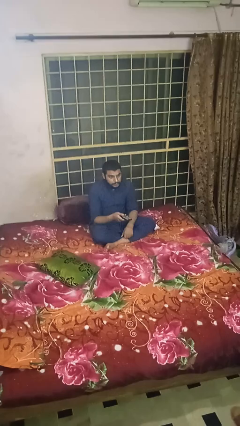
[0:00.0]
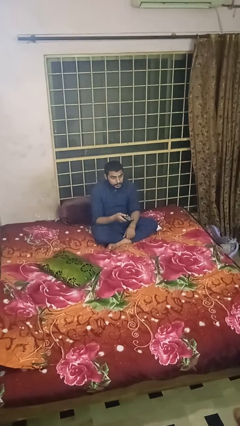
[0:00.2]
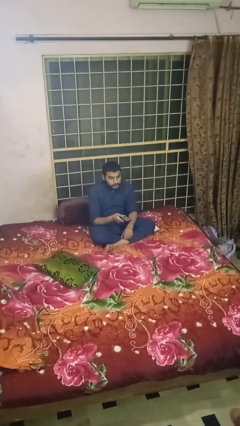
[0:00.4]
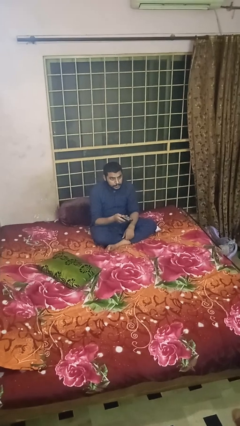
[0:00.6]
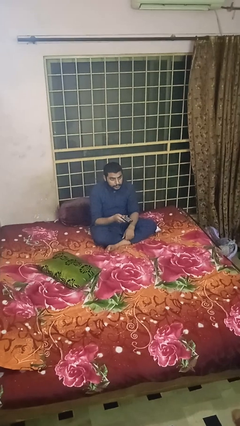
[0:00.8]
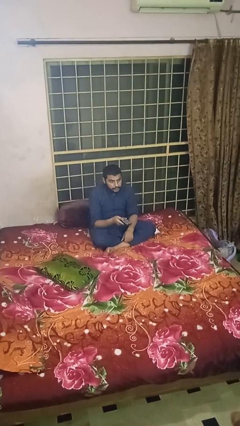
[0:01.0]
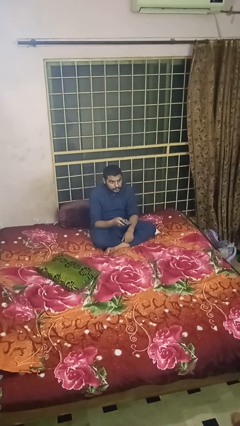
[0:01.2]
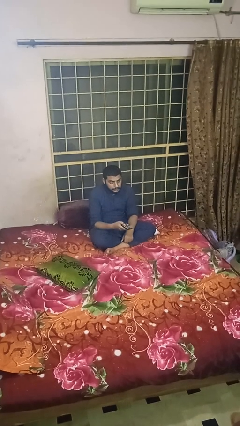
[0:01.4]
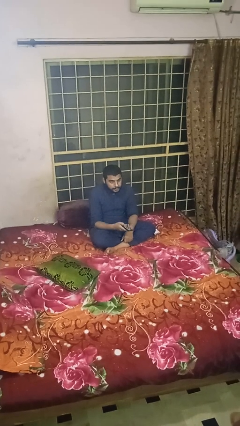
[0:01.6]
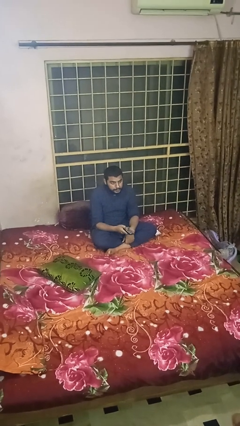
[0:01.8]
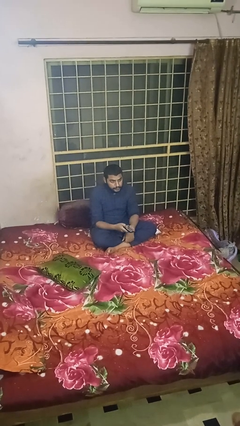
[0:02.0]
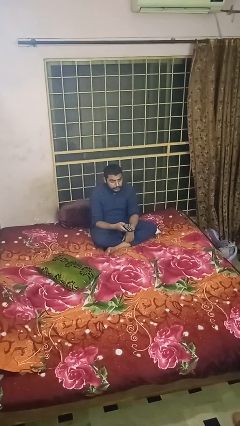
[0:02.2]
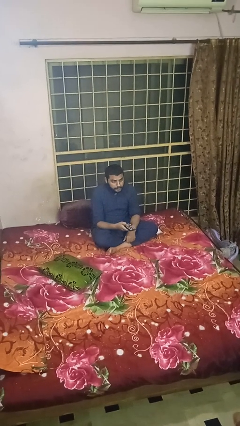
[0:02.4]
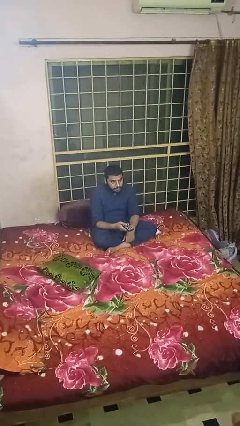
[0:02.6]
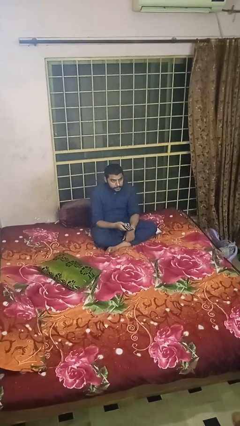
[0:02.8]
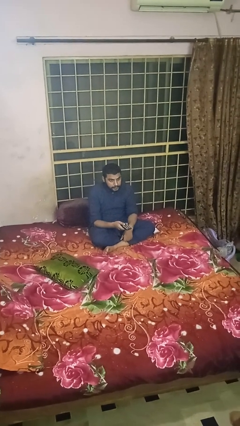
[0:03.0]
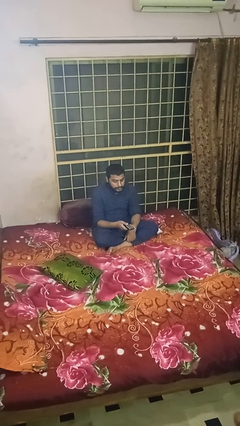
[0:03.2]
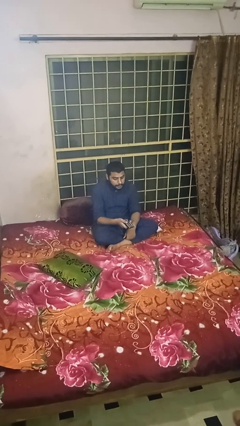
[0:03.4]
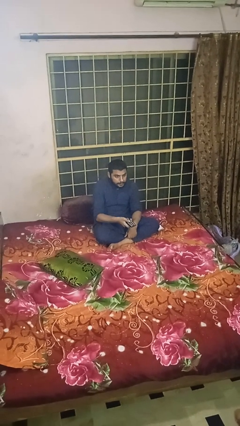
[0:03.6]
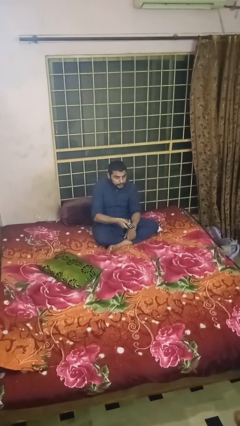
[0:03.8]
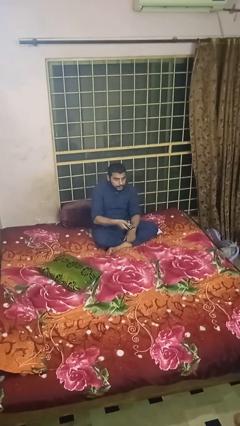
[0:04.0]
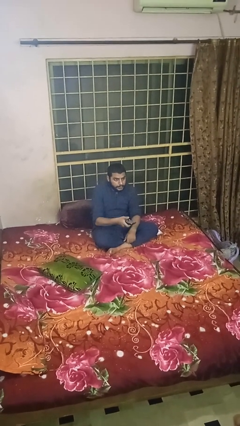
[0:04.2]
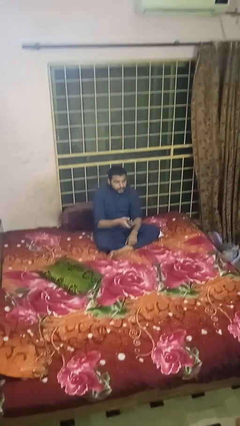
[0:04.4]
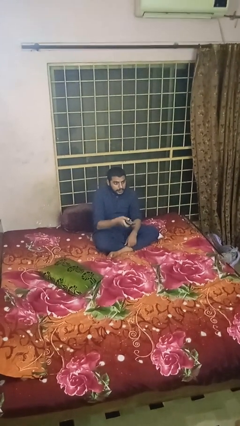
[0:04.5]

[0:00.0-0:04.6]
person uses television remote

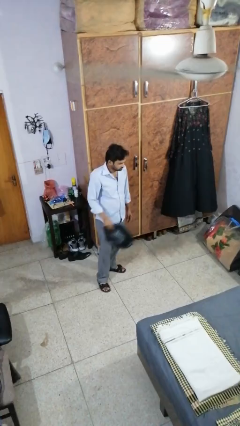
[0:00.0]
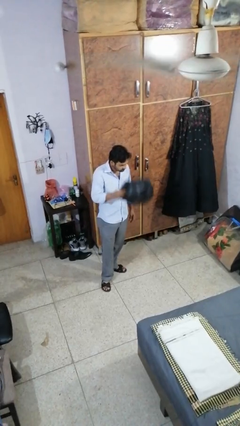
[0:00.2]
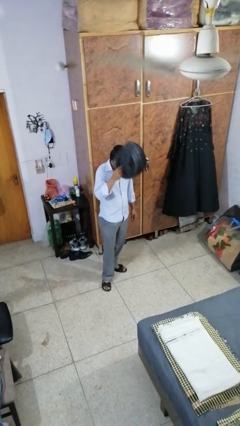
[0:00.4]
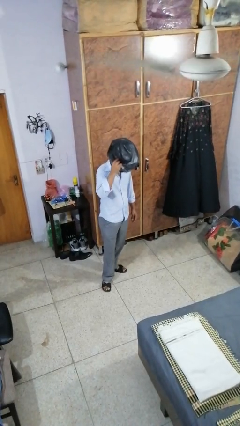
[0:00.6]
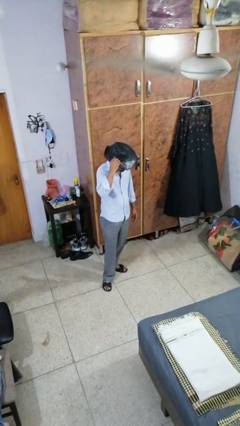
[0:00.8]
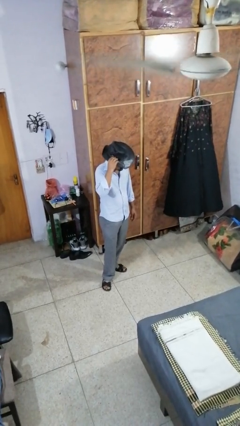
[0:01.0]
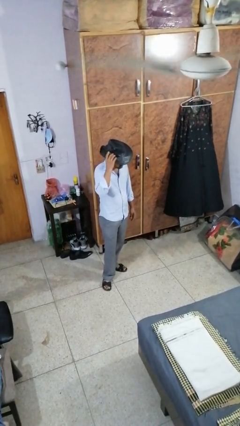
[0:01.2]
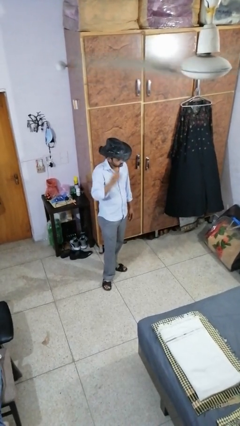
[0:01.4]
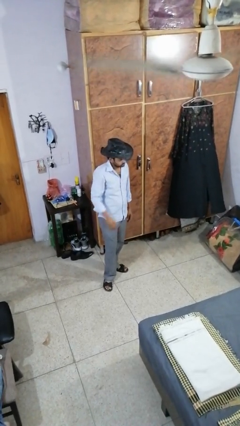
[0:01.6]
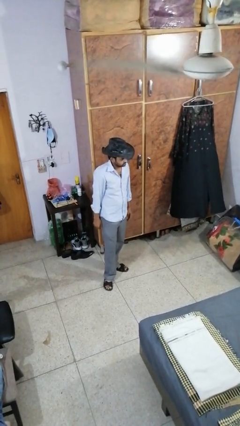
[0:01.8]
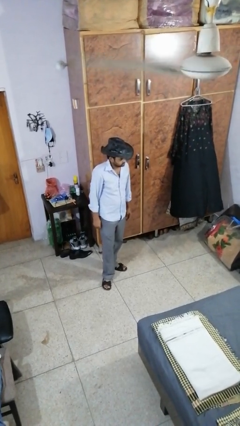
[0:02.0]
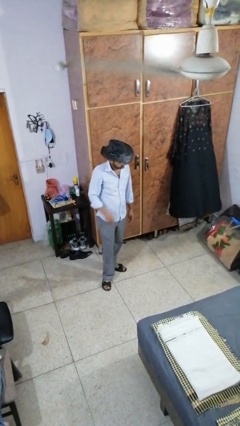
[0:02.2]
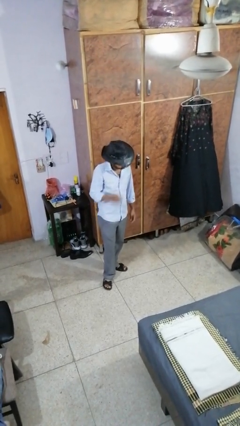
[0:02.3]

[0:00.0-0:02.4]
person puts on hat

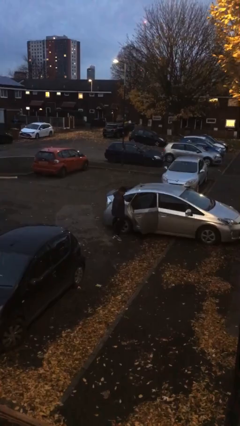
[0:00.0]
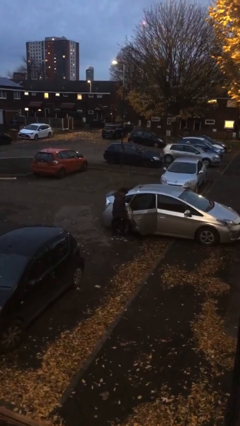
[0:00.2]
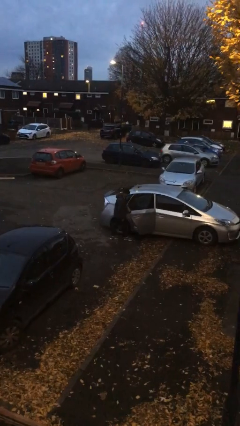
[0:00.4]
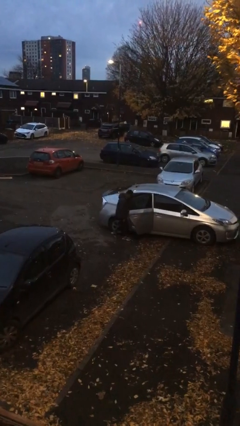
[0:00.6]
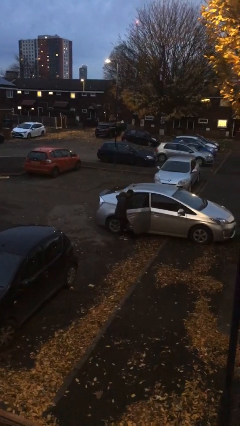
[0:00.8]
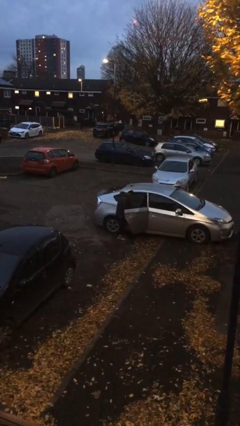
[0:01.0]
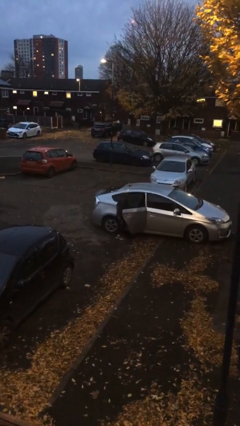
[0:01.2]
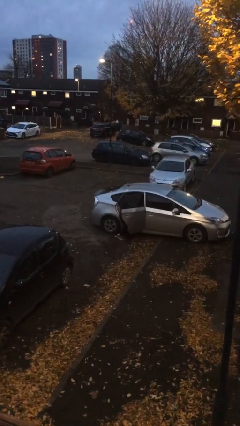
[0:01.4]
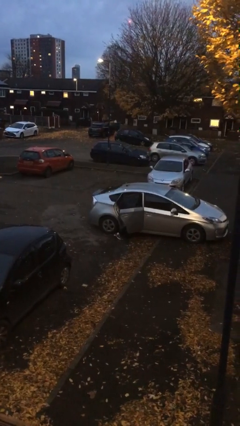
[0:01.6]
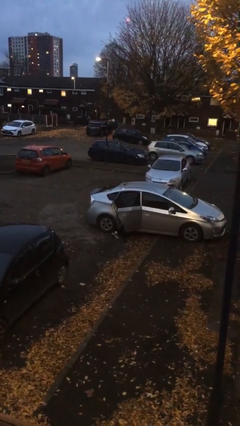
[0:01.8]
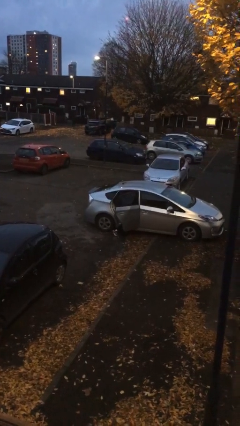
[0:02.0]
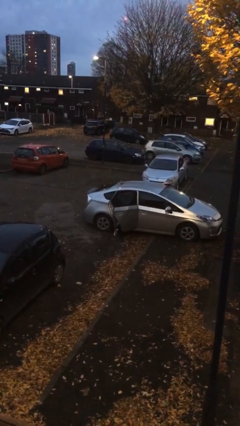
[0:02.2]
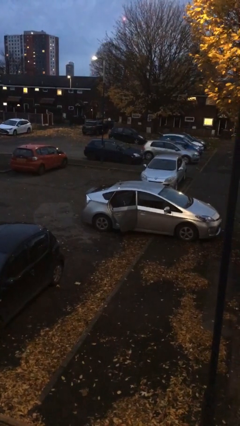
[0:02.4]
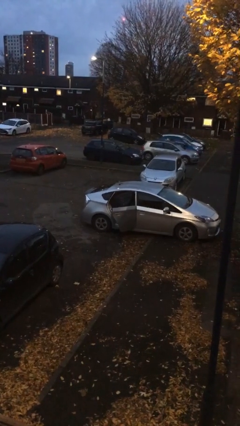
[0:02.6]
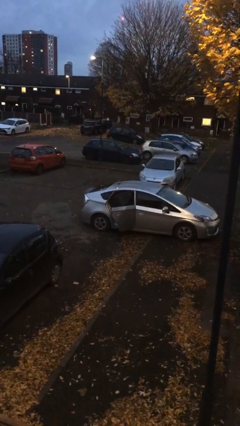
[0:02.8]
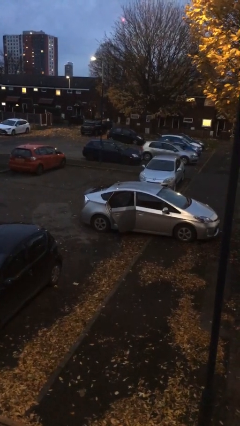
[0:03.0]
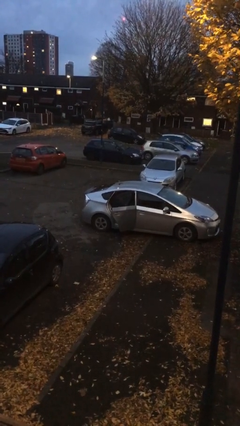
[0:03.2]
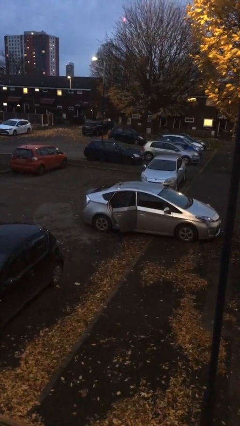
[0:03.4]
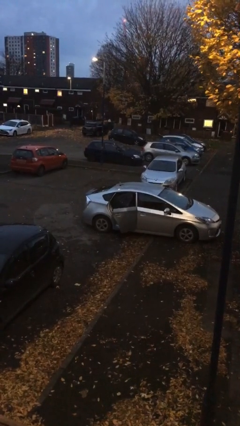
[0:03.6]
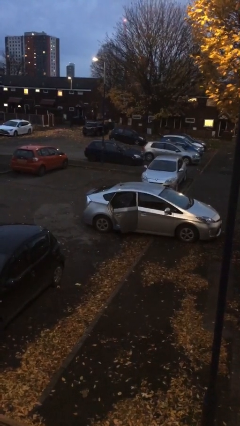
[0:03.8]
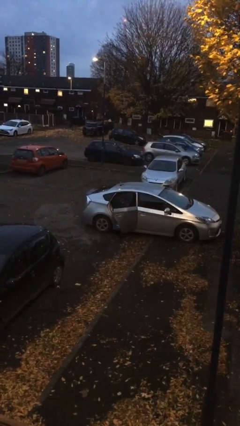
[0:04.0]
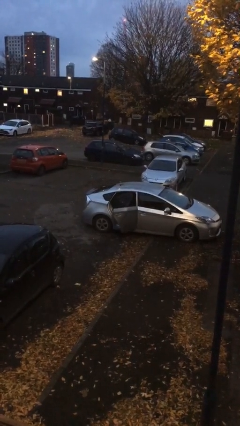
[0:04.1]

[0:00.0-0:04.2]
person enters car

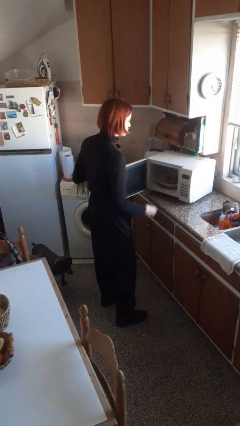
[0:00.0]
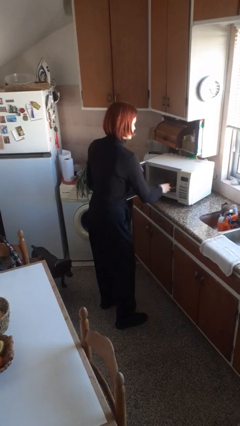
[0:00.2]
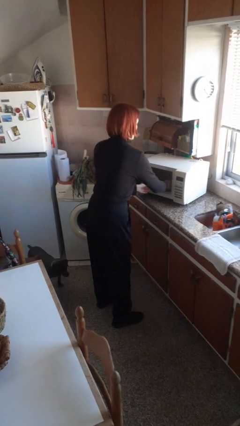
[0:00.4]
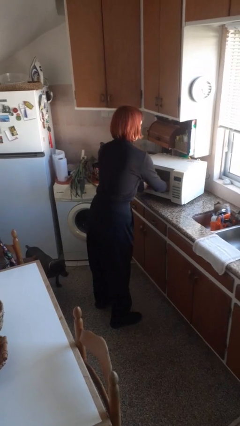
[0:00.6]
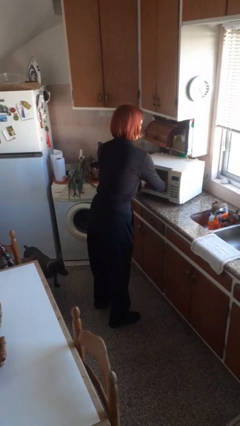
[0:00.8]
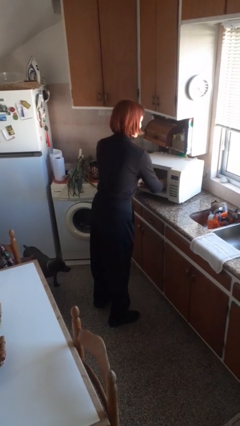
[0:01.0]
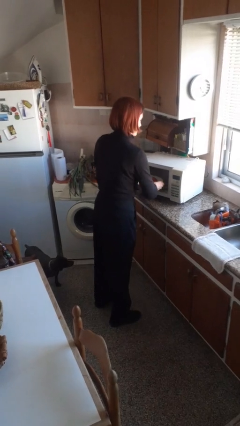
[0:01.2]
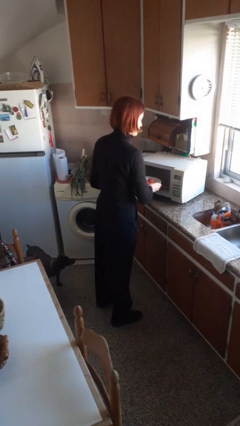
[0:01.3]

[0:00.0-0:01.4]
person takes object from microwave

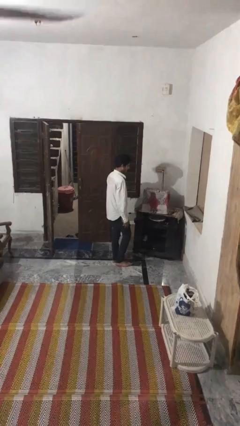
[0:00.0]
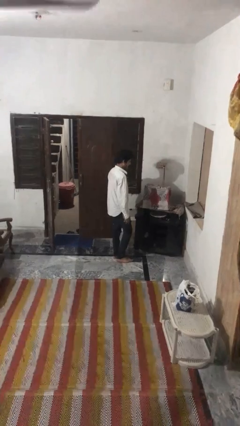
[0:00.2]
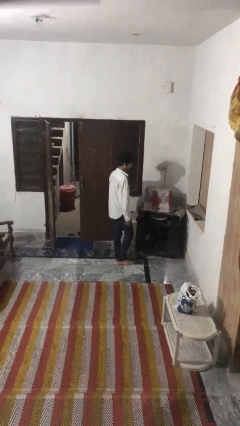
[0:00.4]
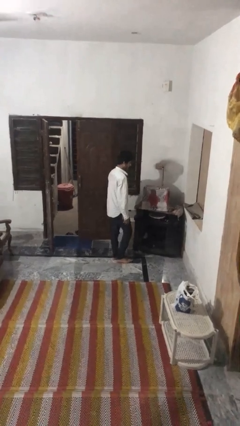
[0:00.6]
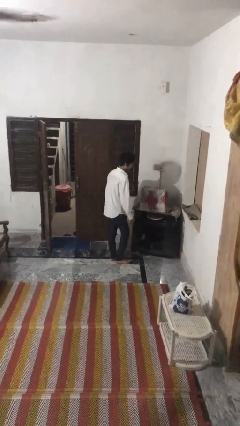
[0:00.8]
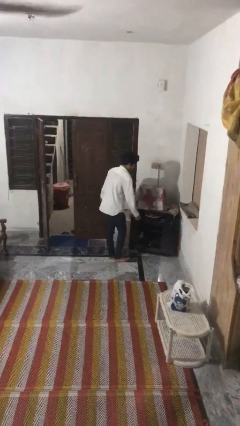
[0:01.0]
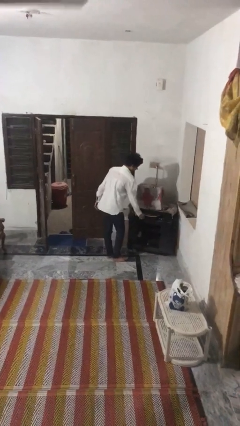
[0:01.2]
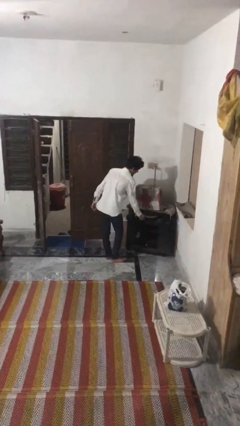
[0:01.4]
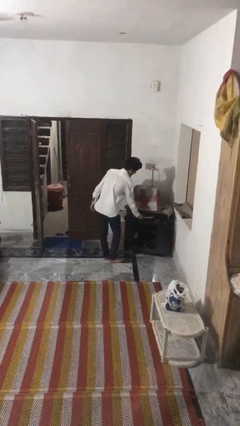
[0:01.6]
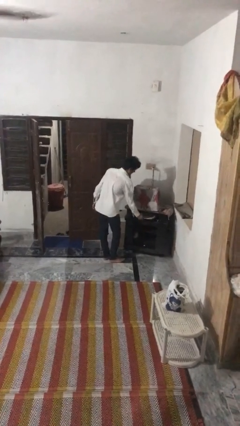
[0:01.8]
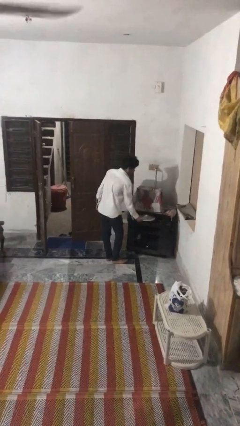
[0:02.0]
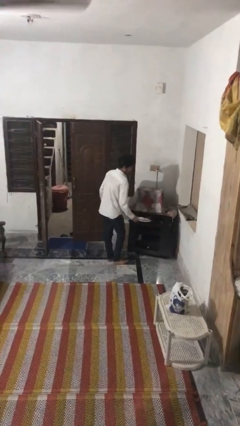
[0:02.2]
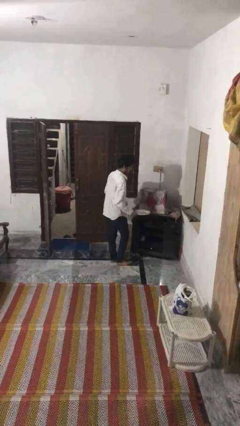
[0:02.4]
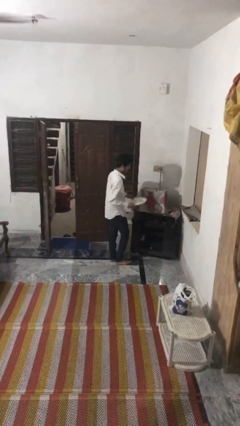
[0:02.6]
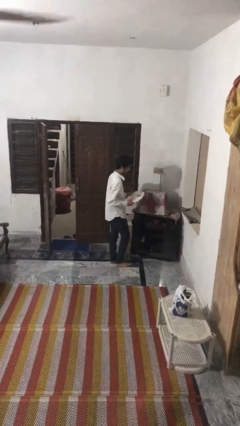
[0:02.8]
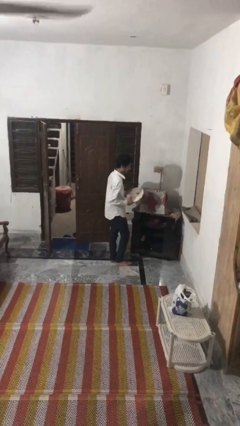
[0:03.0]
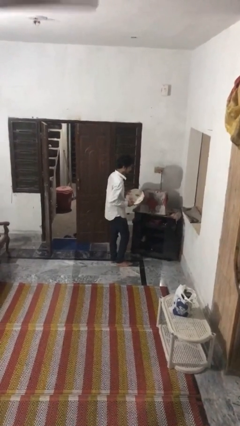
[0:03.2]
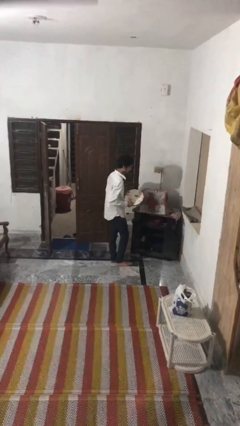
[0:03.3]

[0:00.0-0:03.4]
person picks up object from cabinet

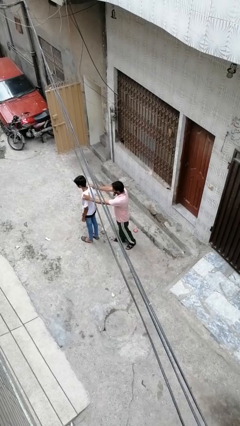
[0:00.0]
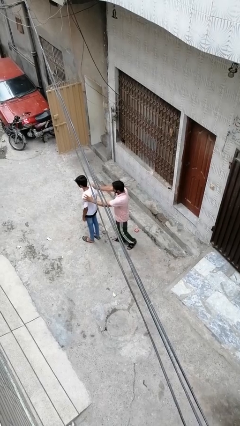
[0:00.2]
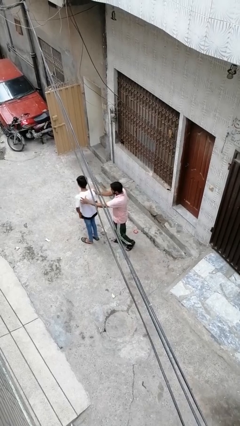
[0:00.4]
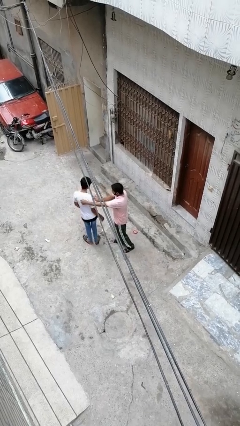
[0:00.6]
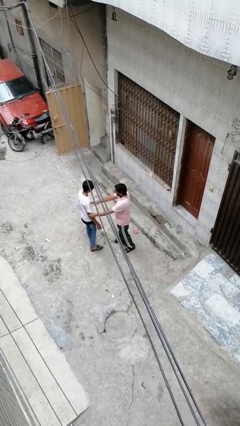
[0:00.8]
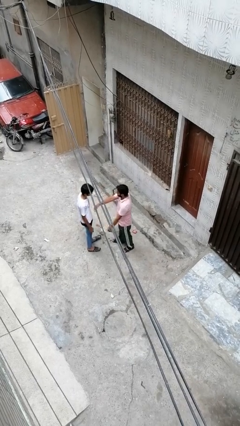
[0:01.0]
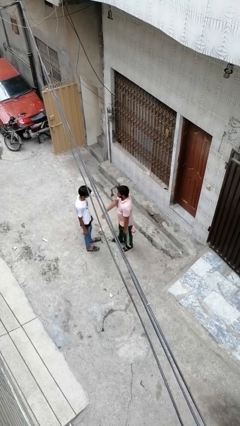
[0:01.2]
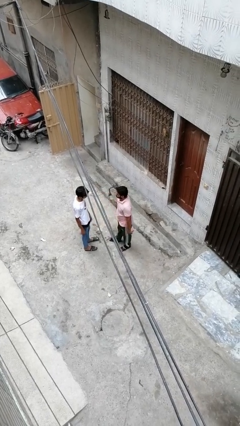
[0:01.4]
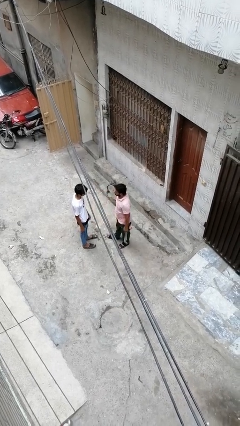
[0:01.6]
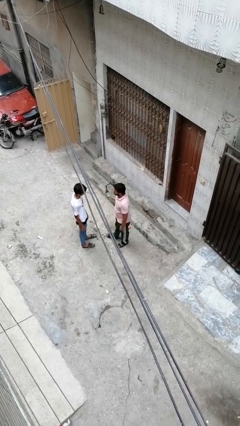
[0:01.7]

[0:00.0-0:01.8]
person spins person around
